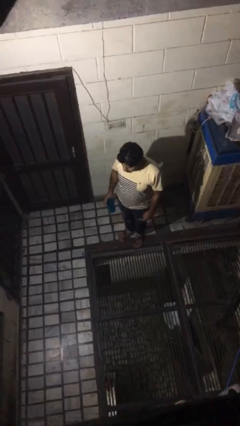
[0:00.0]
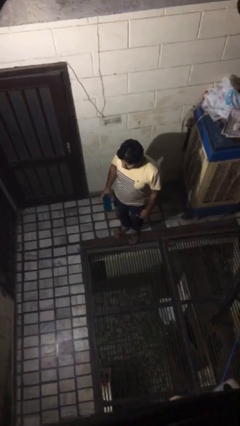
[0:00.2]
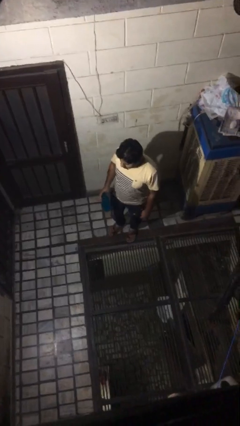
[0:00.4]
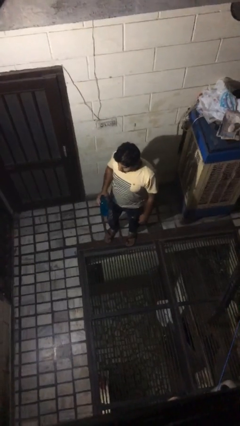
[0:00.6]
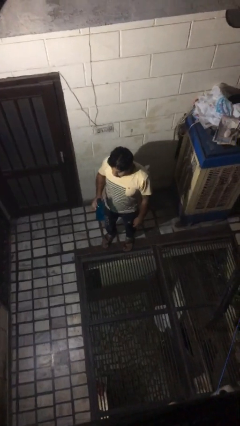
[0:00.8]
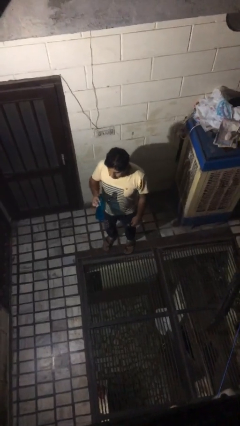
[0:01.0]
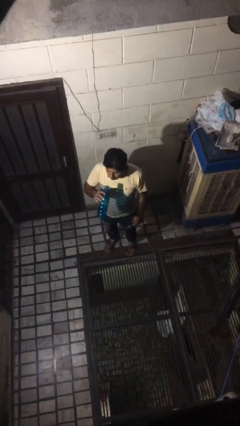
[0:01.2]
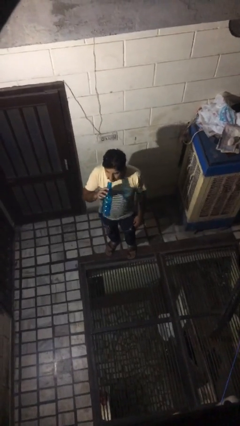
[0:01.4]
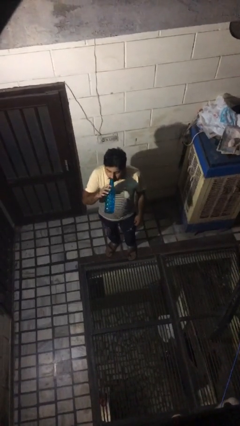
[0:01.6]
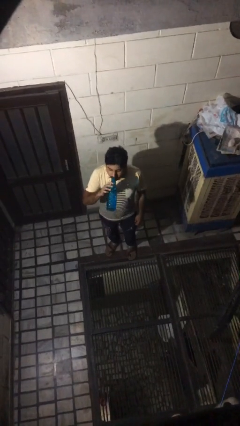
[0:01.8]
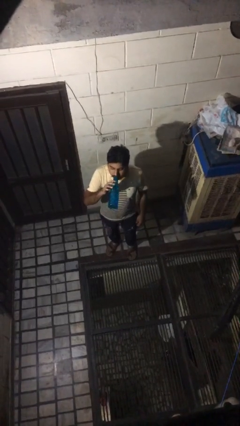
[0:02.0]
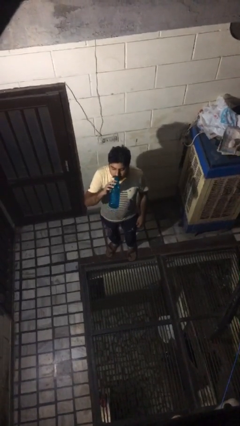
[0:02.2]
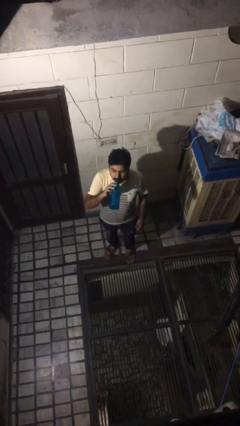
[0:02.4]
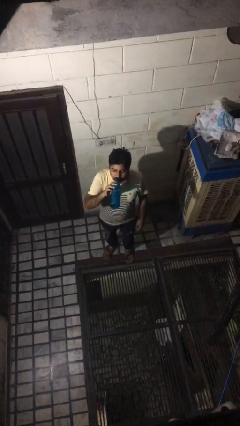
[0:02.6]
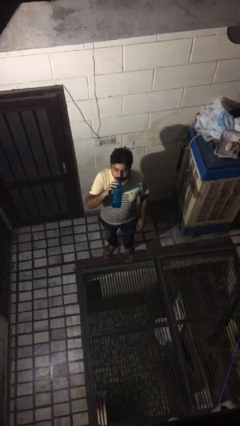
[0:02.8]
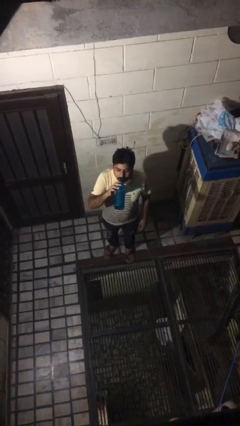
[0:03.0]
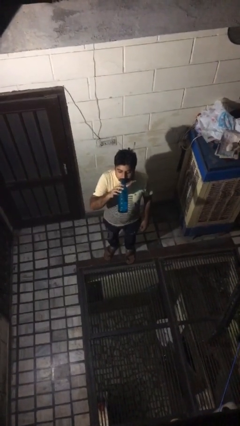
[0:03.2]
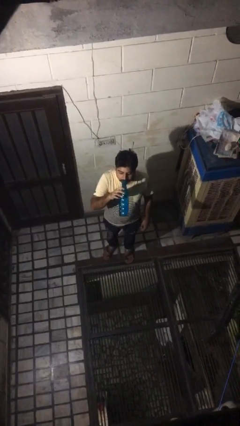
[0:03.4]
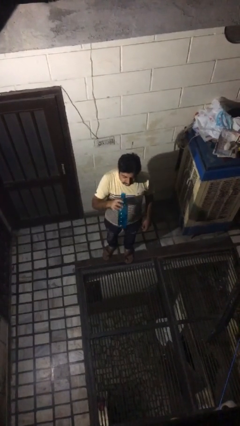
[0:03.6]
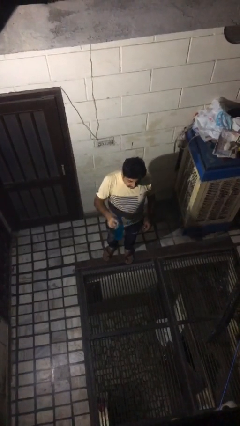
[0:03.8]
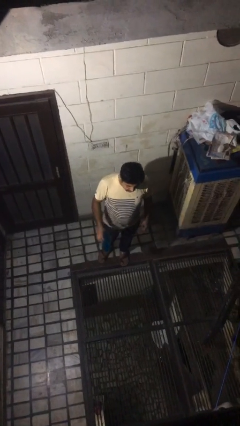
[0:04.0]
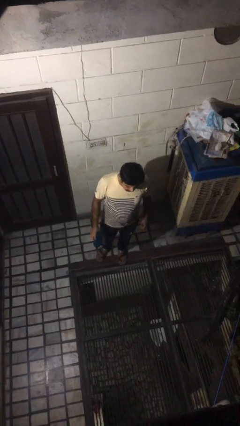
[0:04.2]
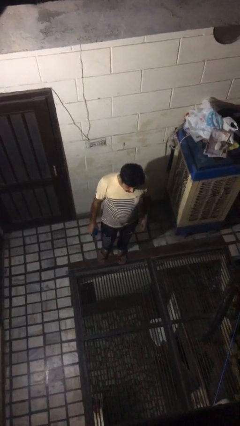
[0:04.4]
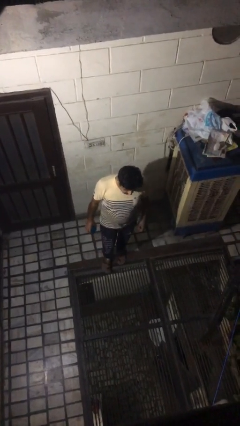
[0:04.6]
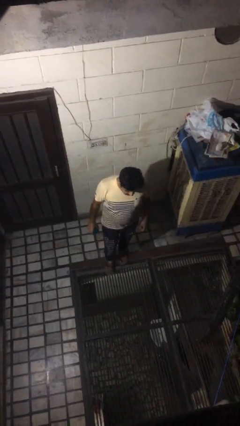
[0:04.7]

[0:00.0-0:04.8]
person drinks from bottle

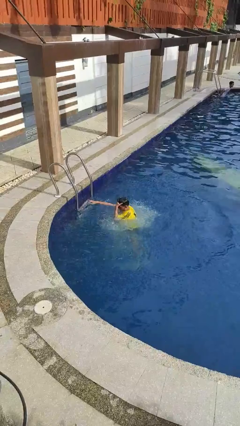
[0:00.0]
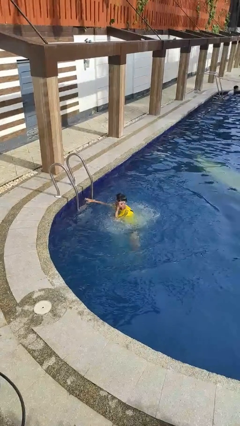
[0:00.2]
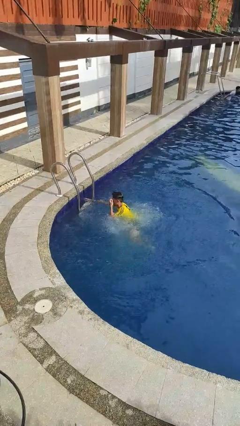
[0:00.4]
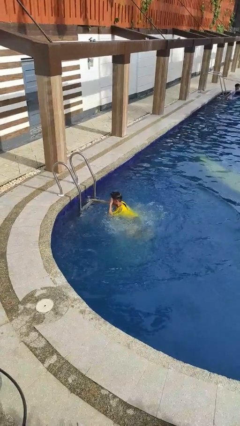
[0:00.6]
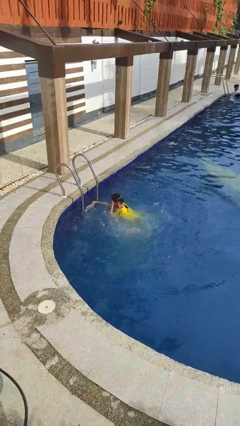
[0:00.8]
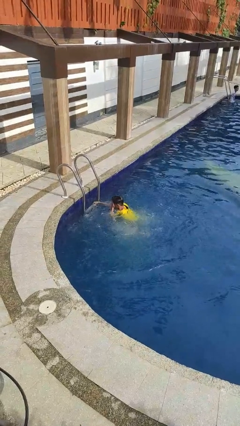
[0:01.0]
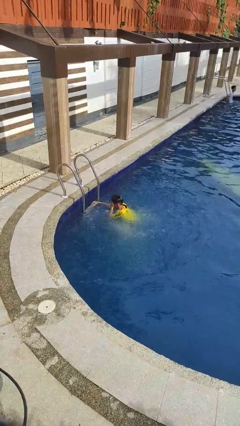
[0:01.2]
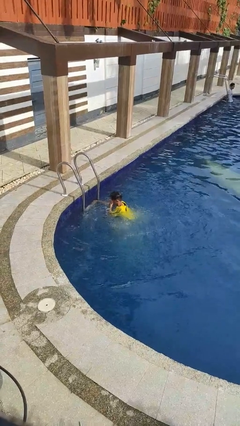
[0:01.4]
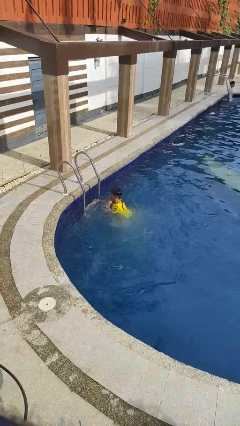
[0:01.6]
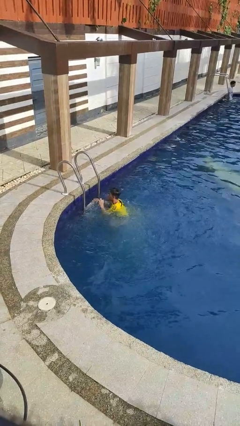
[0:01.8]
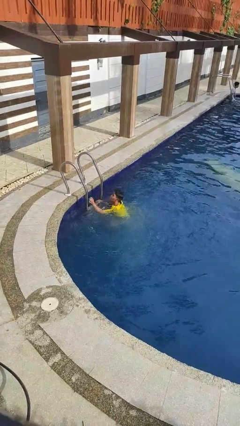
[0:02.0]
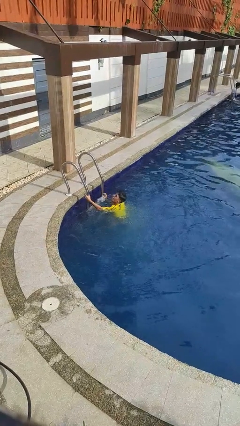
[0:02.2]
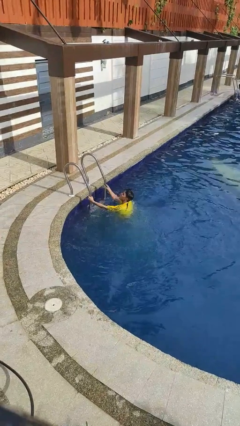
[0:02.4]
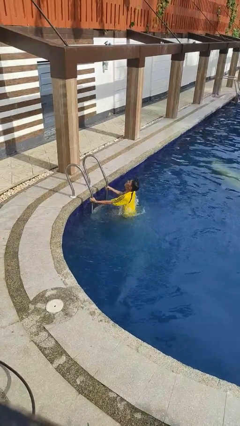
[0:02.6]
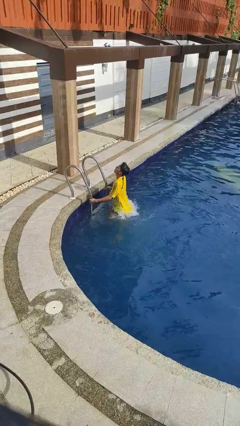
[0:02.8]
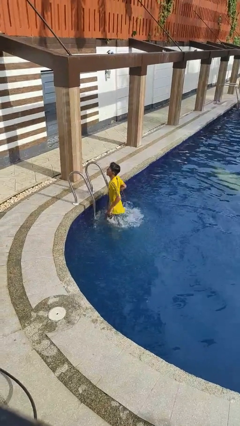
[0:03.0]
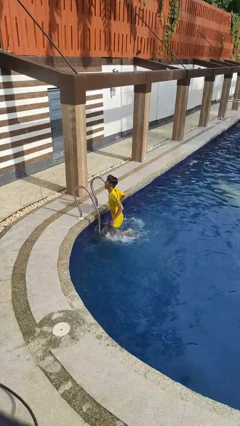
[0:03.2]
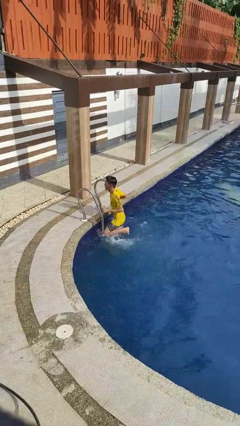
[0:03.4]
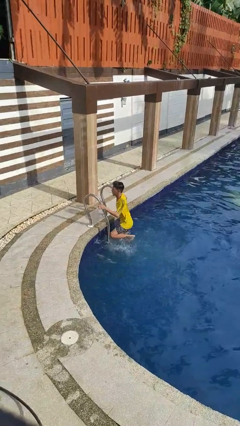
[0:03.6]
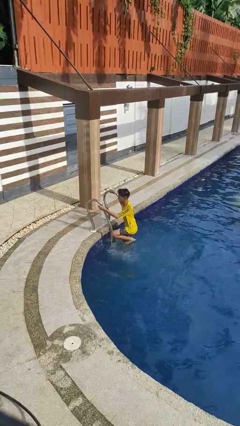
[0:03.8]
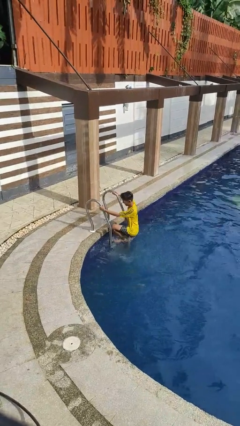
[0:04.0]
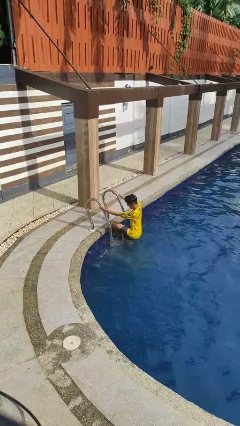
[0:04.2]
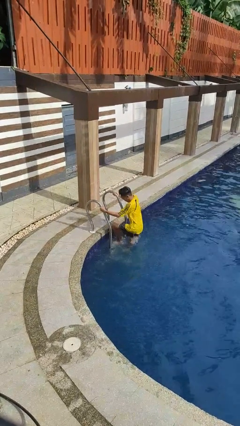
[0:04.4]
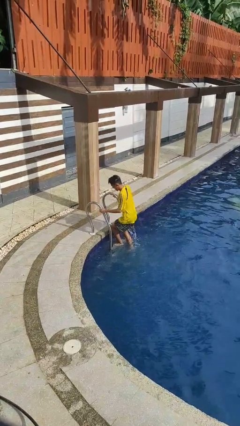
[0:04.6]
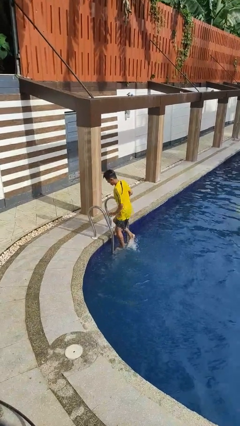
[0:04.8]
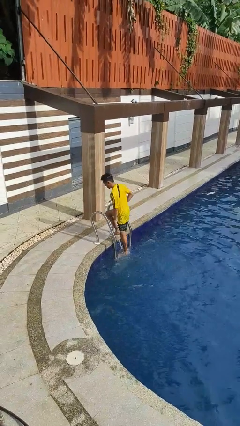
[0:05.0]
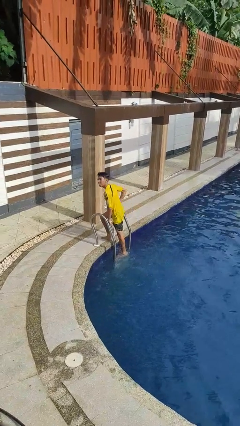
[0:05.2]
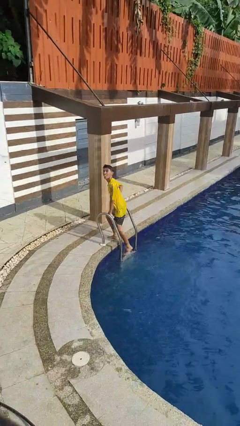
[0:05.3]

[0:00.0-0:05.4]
person exits pool

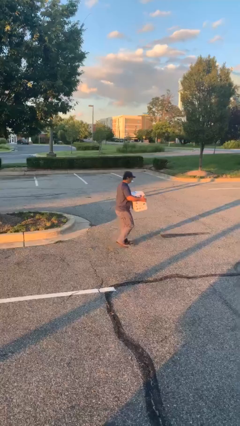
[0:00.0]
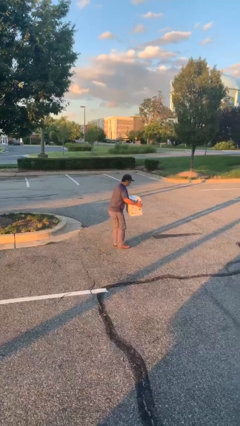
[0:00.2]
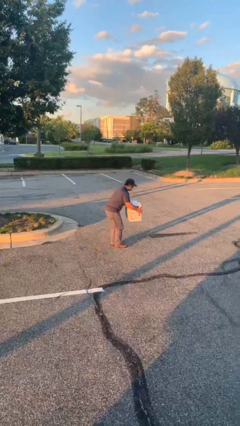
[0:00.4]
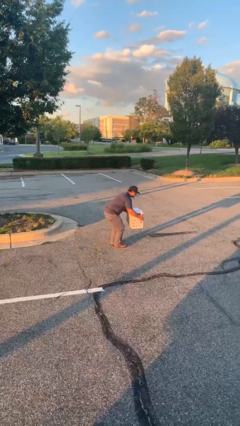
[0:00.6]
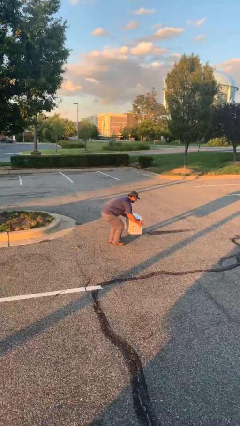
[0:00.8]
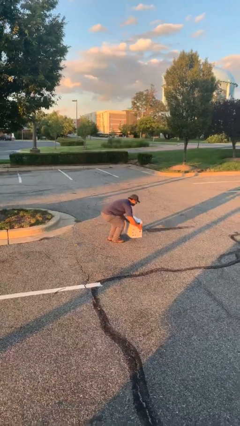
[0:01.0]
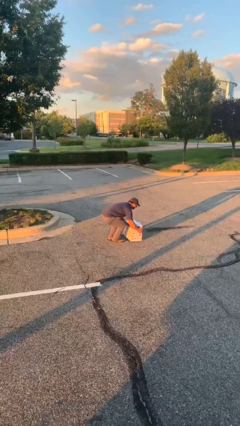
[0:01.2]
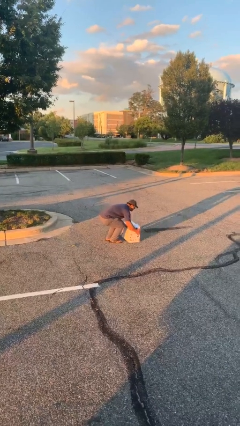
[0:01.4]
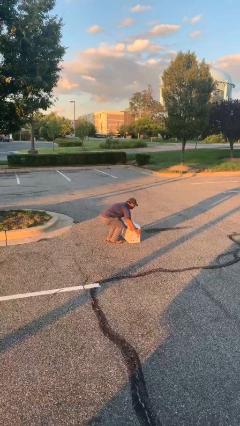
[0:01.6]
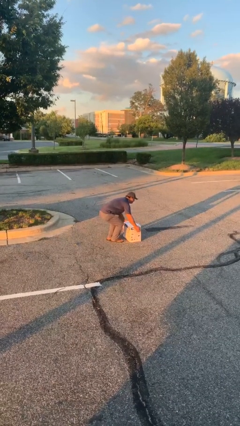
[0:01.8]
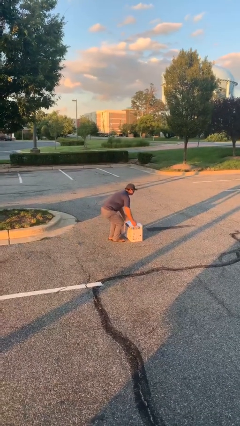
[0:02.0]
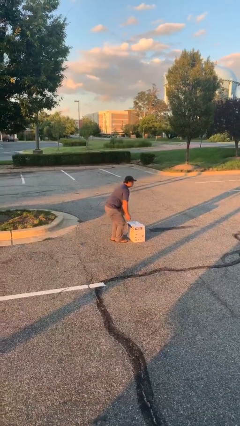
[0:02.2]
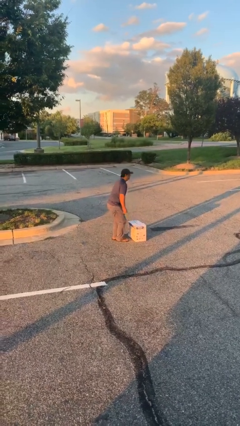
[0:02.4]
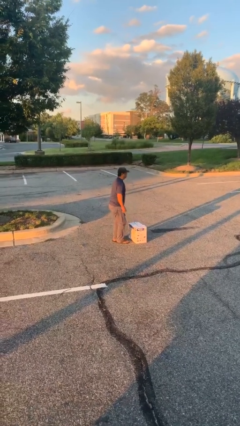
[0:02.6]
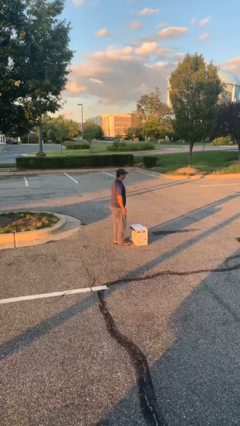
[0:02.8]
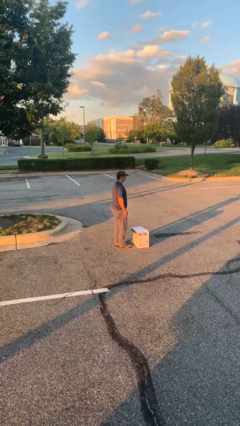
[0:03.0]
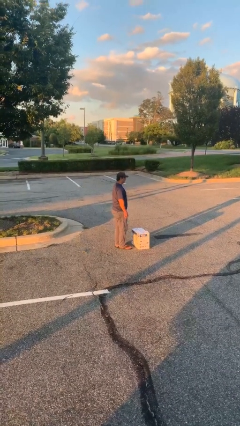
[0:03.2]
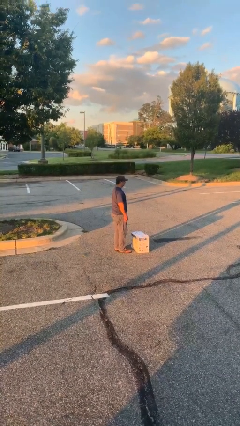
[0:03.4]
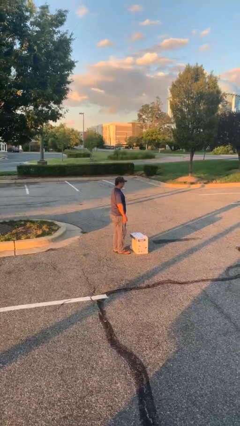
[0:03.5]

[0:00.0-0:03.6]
person puts down object on floor

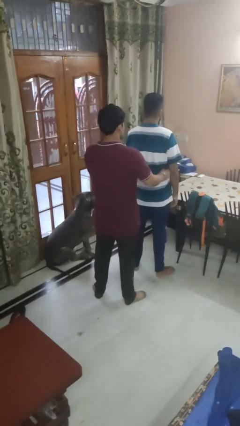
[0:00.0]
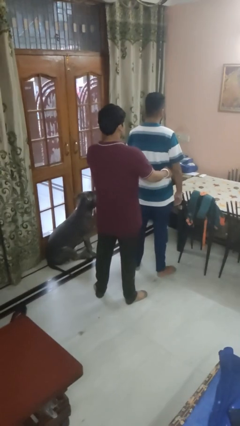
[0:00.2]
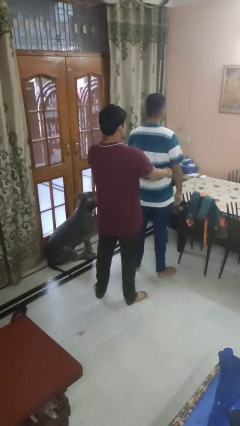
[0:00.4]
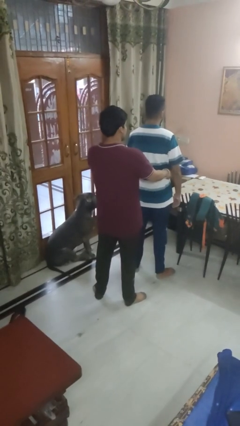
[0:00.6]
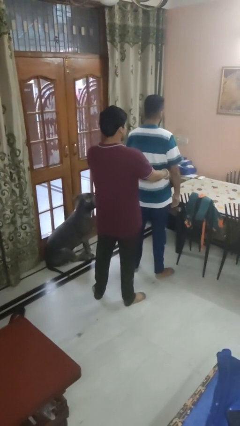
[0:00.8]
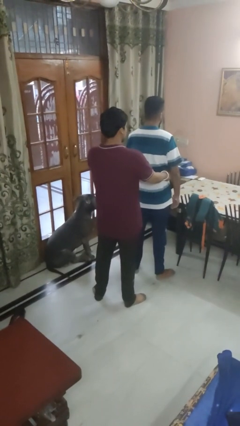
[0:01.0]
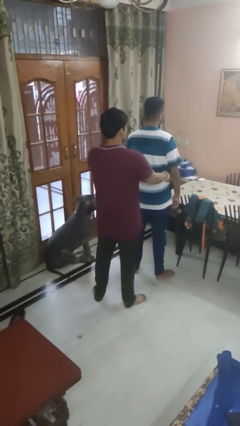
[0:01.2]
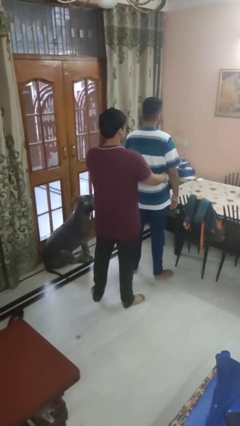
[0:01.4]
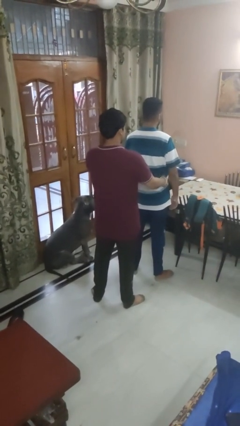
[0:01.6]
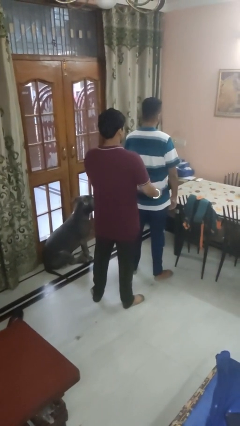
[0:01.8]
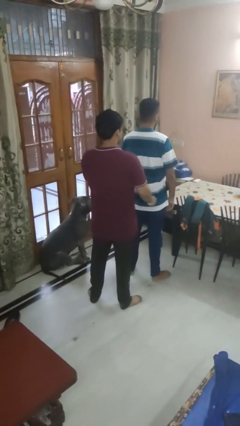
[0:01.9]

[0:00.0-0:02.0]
person tickles person

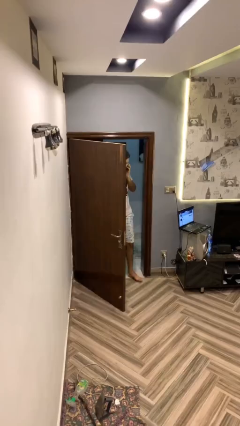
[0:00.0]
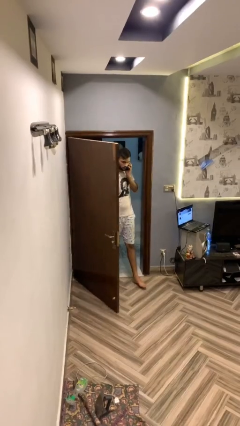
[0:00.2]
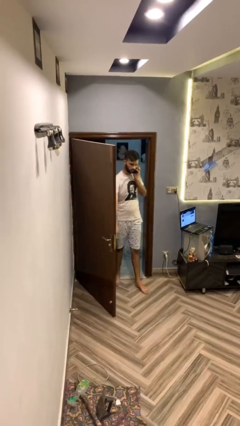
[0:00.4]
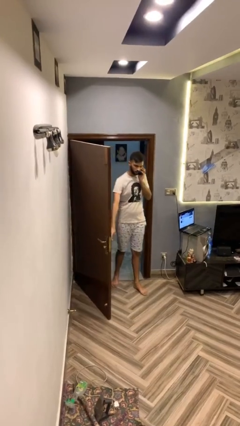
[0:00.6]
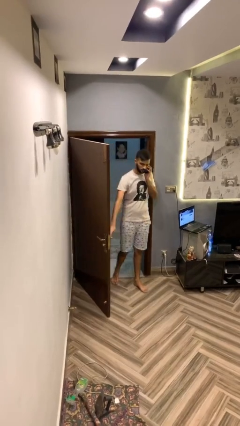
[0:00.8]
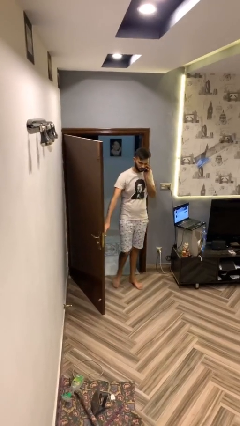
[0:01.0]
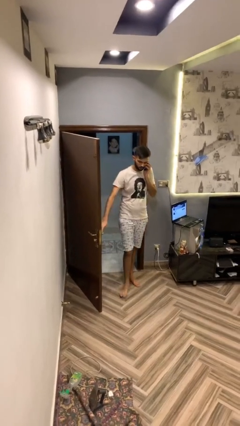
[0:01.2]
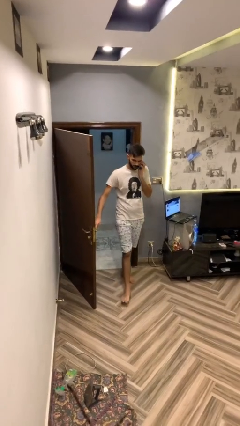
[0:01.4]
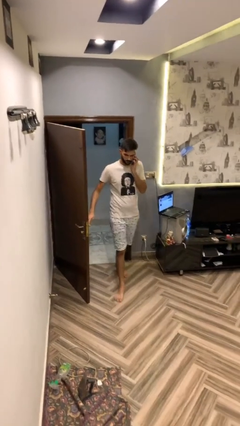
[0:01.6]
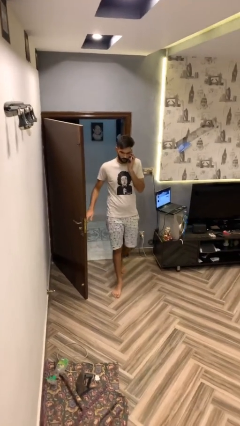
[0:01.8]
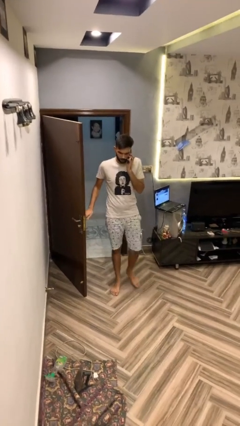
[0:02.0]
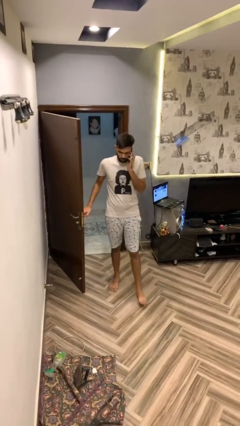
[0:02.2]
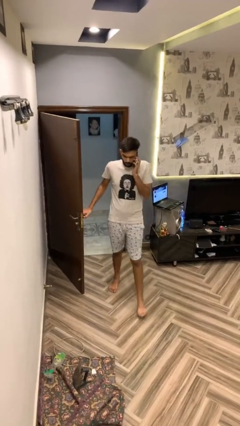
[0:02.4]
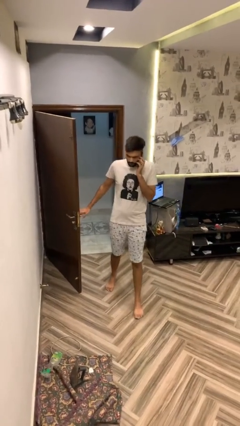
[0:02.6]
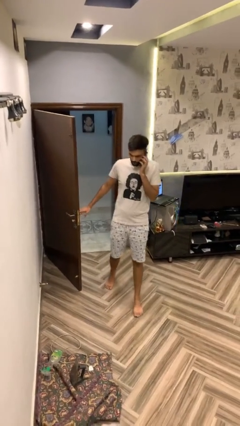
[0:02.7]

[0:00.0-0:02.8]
person enters scene through structure
